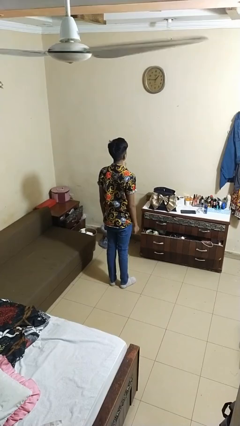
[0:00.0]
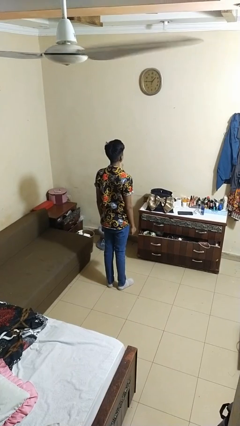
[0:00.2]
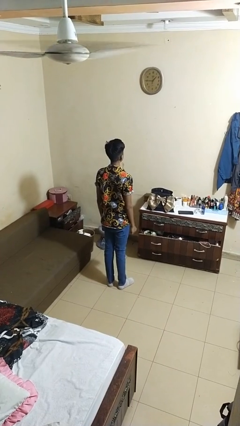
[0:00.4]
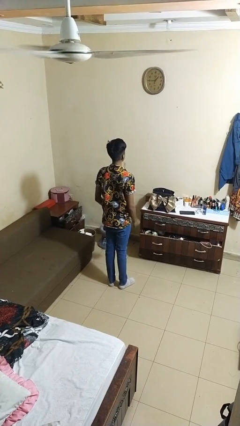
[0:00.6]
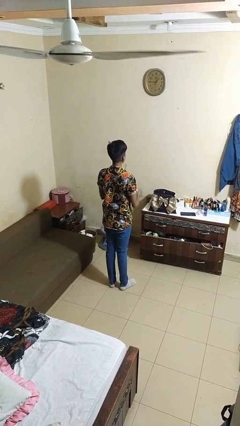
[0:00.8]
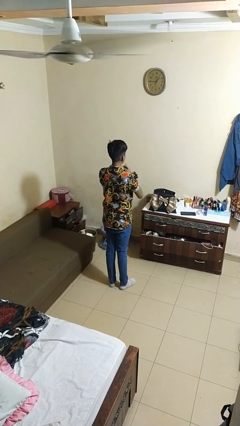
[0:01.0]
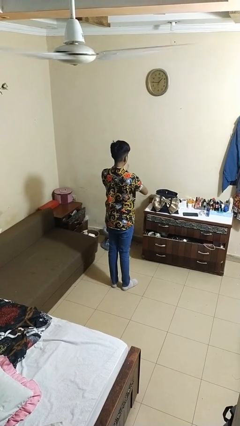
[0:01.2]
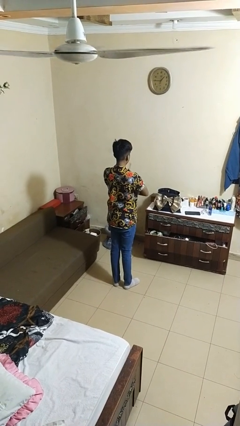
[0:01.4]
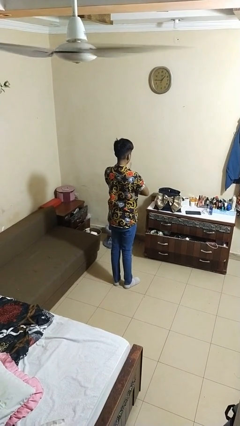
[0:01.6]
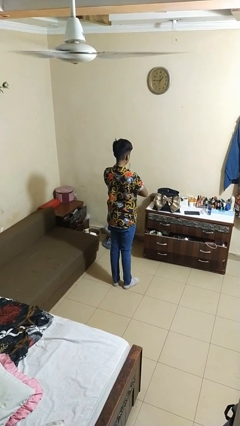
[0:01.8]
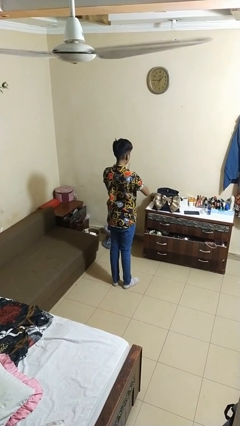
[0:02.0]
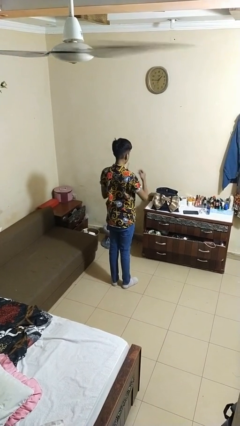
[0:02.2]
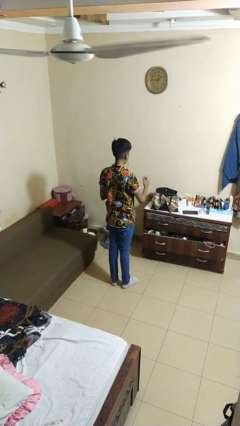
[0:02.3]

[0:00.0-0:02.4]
person crosses arms

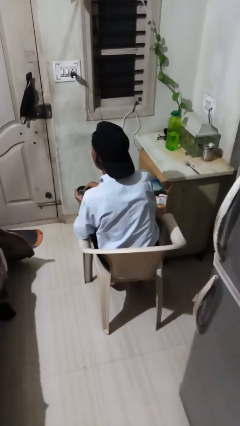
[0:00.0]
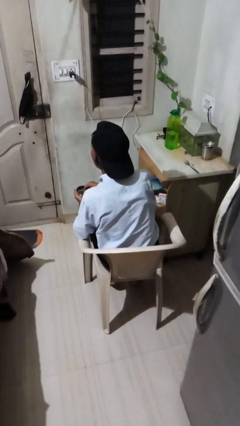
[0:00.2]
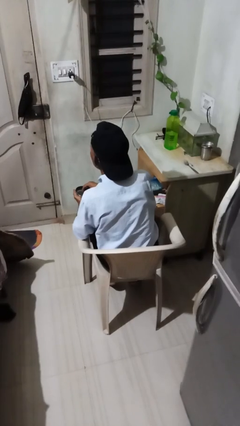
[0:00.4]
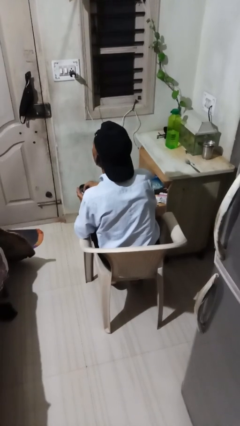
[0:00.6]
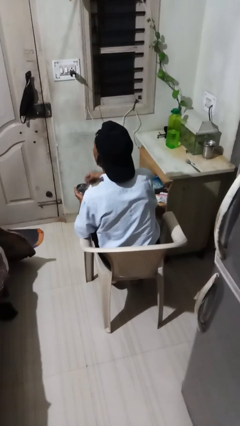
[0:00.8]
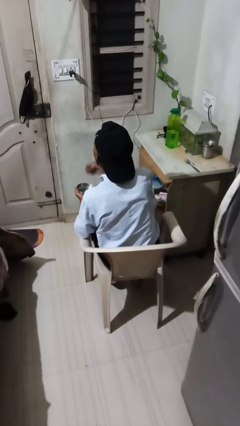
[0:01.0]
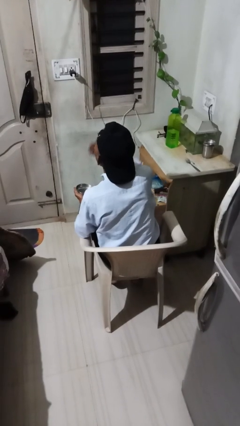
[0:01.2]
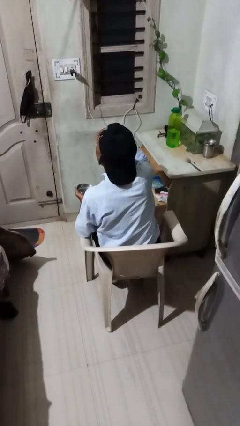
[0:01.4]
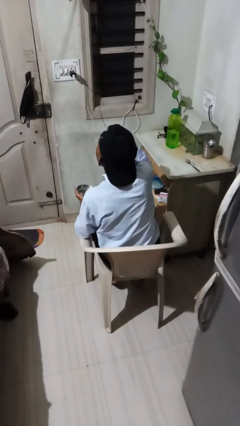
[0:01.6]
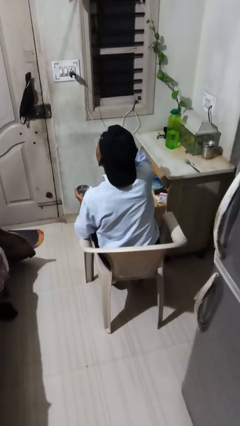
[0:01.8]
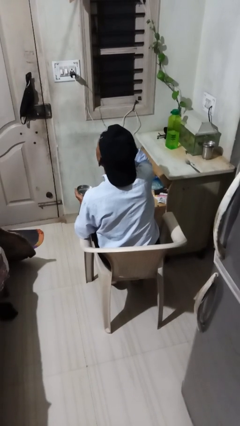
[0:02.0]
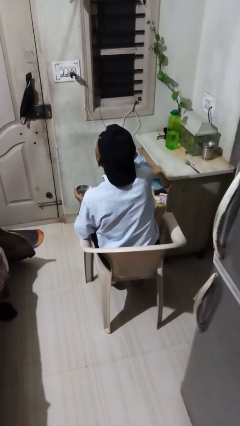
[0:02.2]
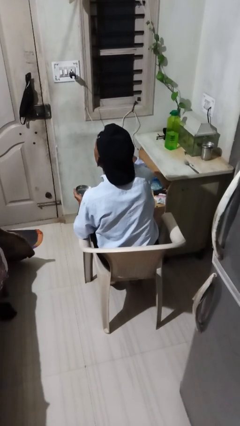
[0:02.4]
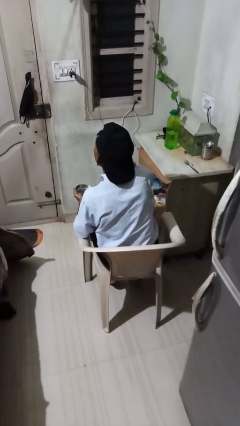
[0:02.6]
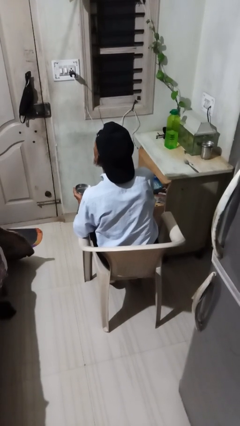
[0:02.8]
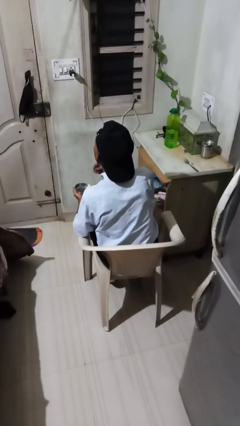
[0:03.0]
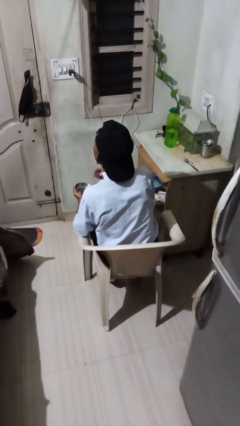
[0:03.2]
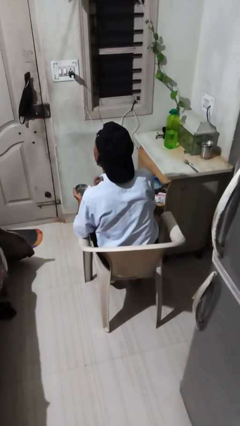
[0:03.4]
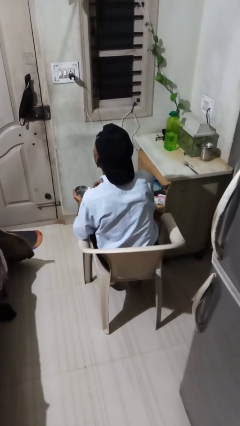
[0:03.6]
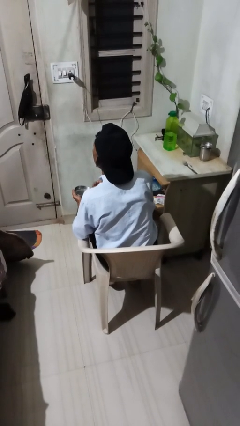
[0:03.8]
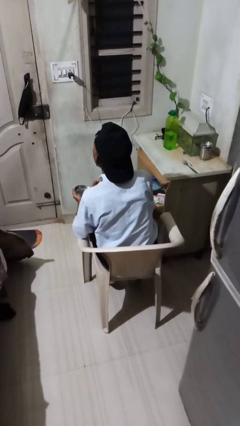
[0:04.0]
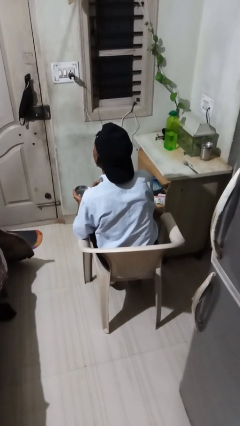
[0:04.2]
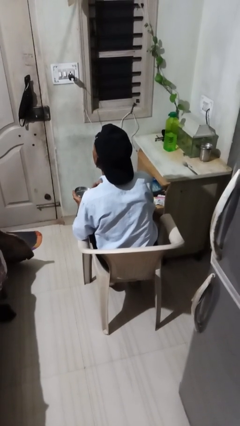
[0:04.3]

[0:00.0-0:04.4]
person eats with hands

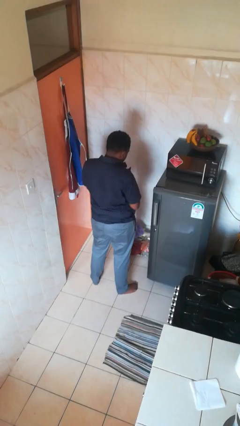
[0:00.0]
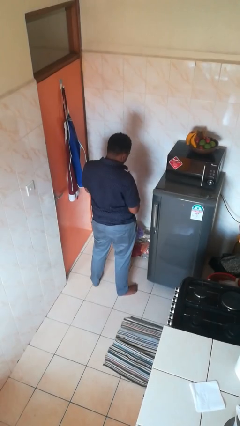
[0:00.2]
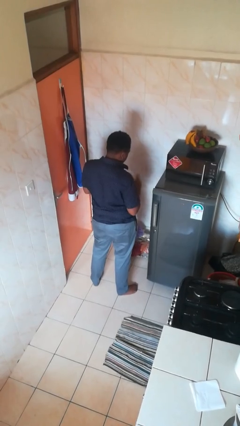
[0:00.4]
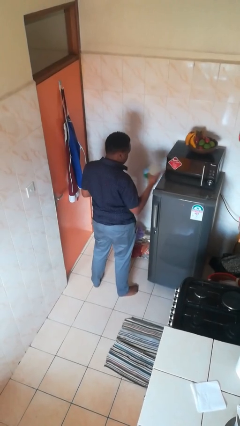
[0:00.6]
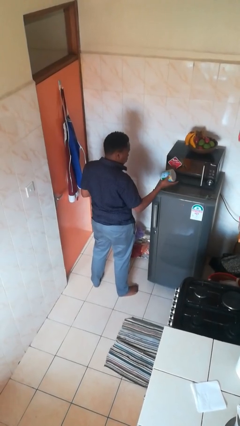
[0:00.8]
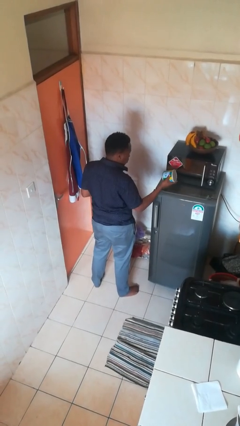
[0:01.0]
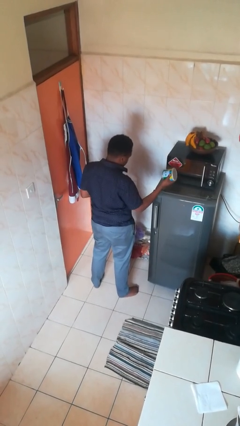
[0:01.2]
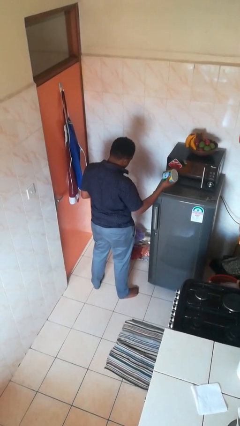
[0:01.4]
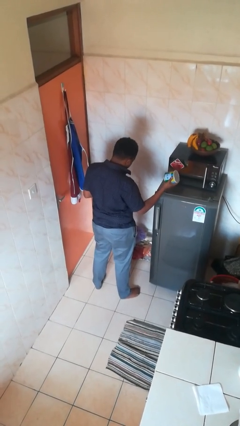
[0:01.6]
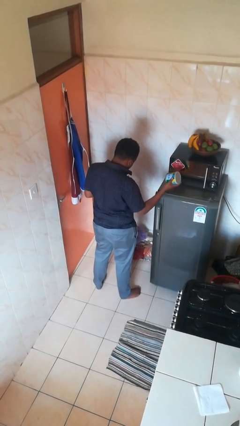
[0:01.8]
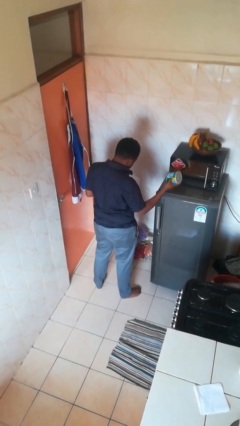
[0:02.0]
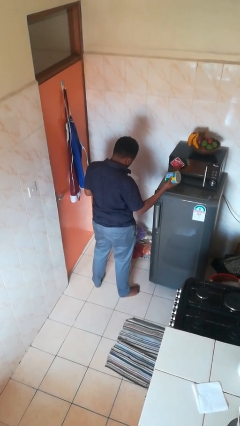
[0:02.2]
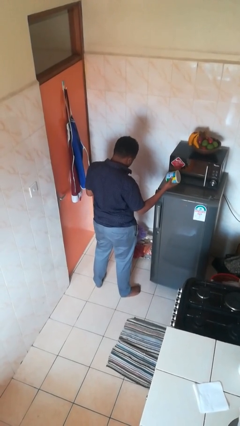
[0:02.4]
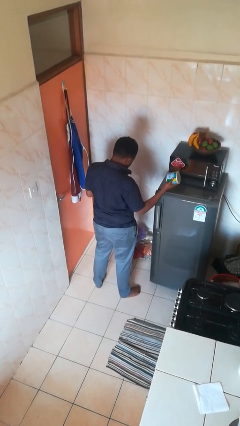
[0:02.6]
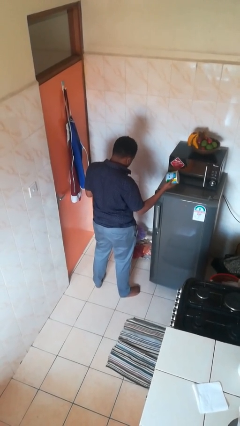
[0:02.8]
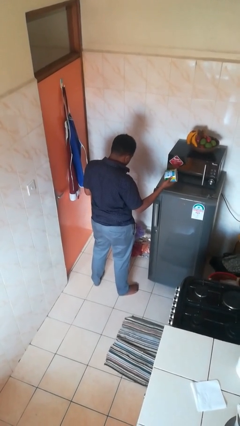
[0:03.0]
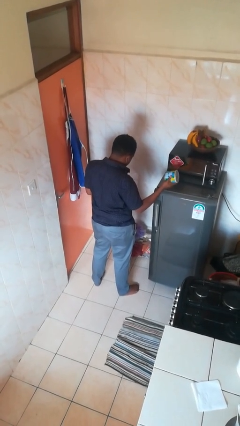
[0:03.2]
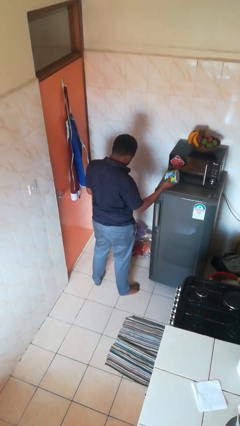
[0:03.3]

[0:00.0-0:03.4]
person takes object from bag

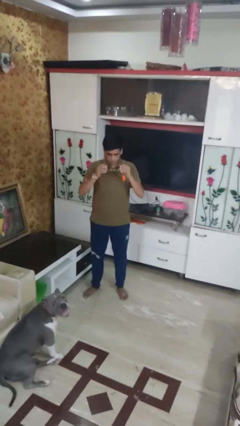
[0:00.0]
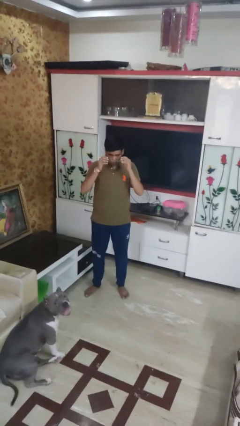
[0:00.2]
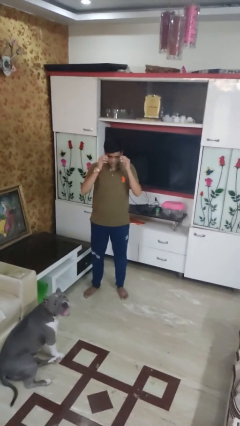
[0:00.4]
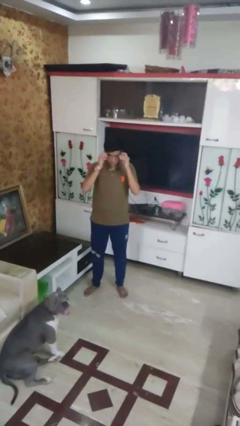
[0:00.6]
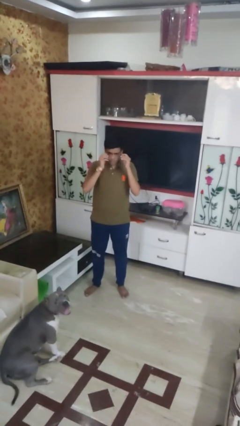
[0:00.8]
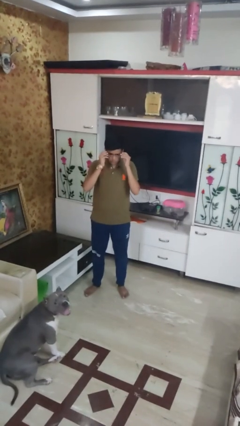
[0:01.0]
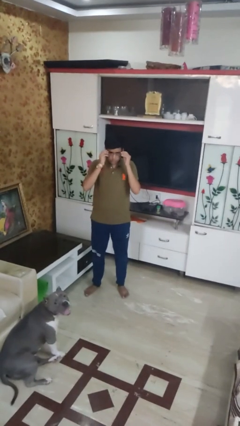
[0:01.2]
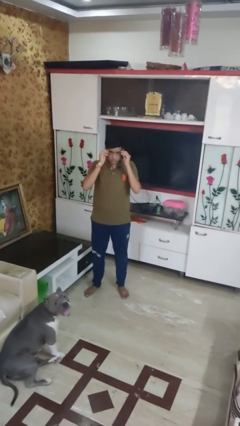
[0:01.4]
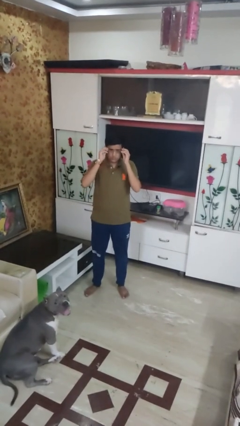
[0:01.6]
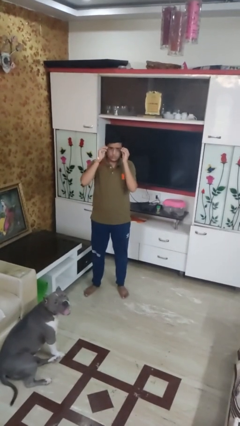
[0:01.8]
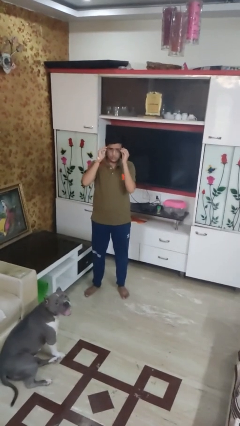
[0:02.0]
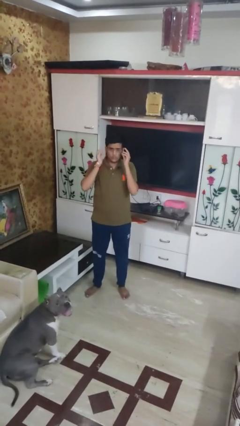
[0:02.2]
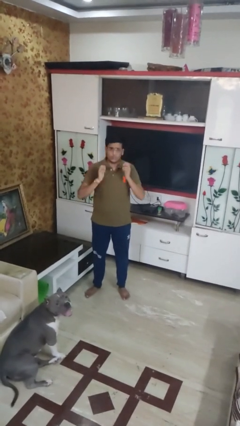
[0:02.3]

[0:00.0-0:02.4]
person puts on glasses

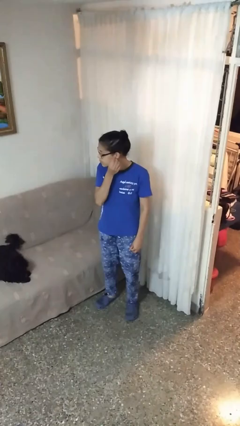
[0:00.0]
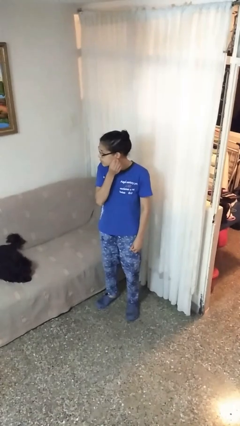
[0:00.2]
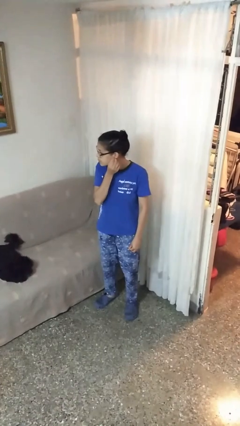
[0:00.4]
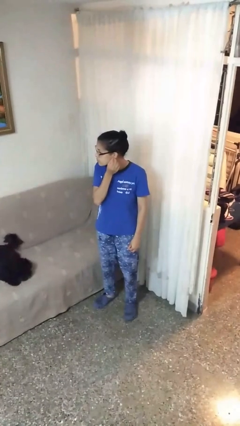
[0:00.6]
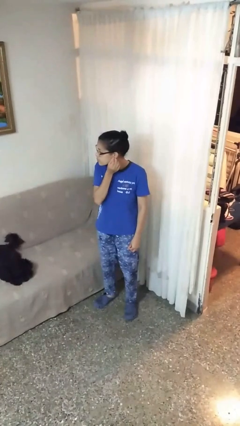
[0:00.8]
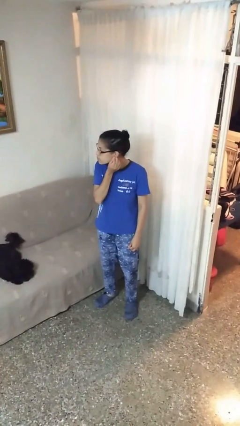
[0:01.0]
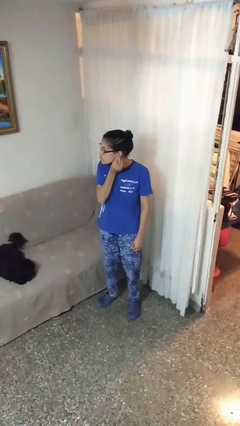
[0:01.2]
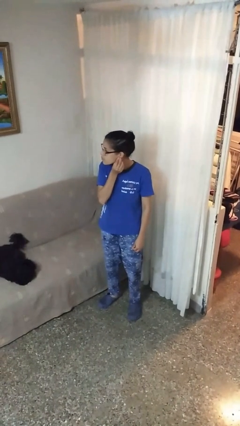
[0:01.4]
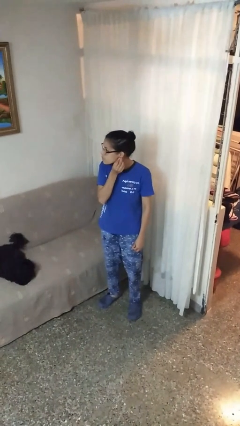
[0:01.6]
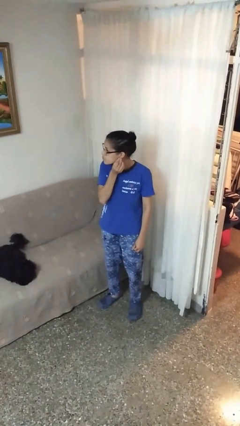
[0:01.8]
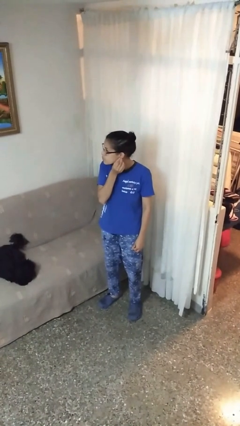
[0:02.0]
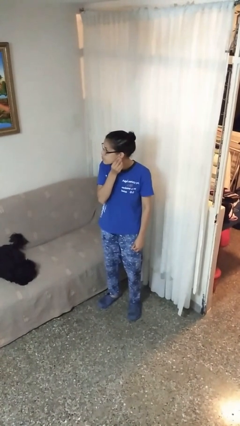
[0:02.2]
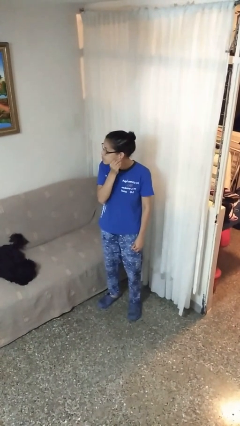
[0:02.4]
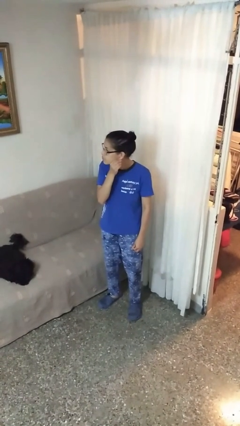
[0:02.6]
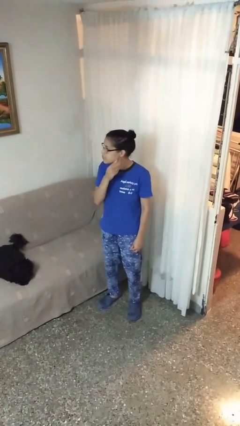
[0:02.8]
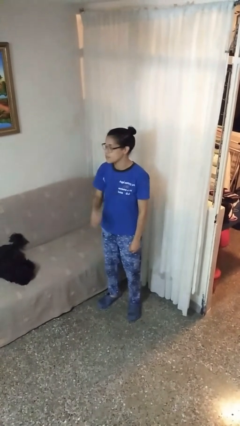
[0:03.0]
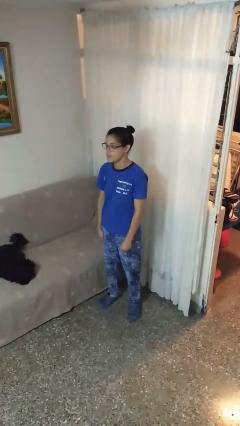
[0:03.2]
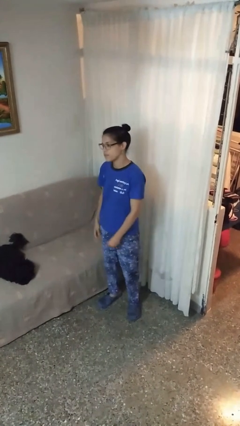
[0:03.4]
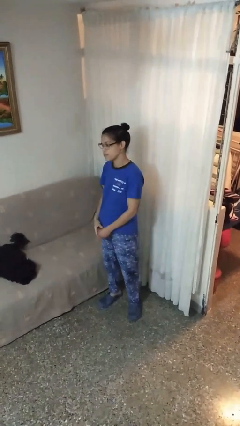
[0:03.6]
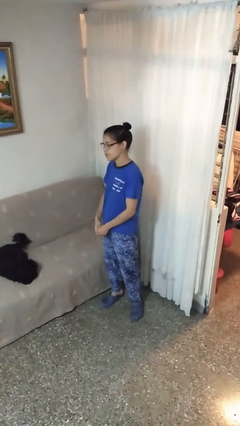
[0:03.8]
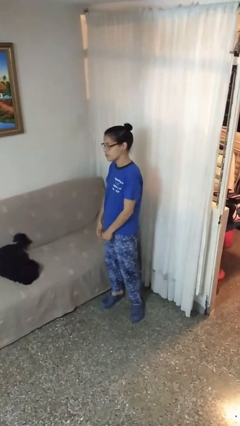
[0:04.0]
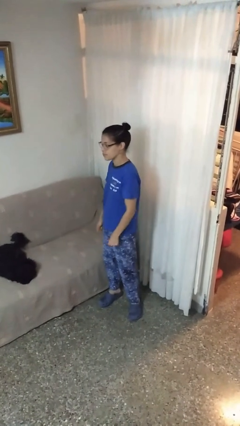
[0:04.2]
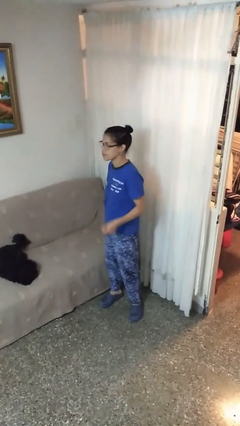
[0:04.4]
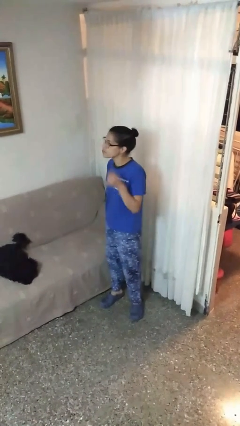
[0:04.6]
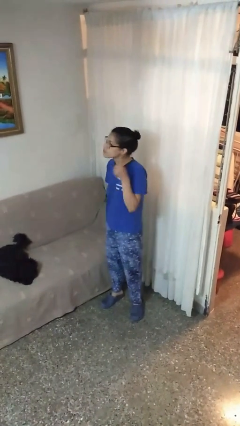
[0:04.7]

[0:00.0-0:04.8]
person puts on earrings
